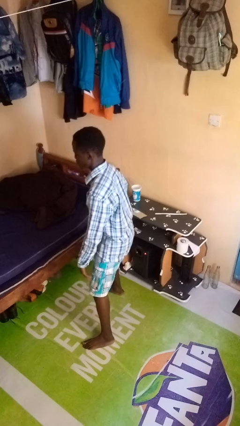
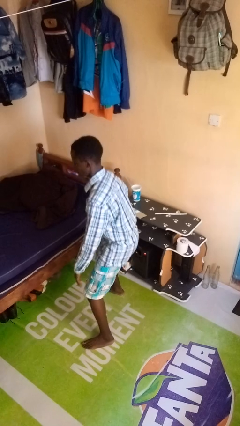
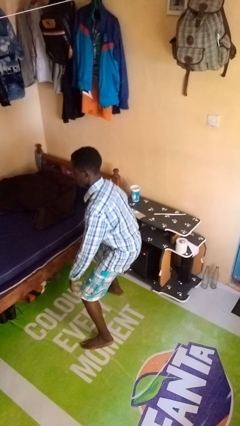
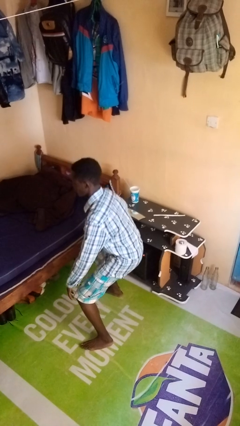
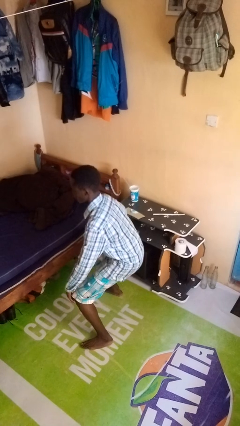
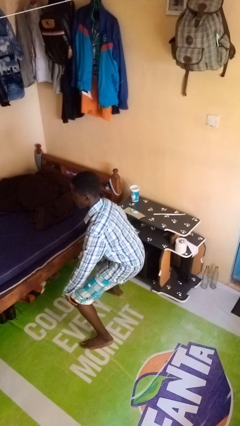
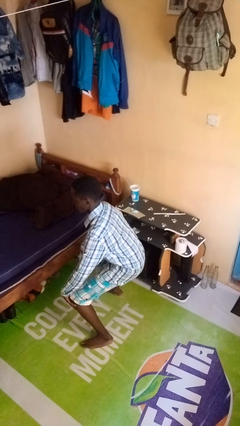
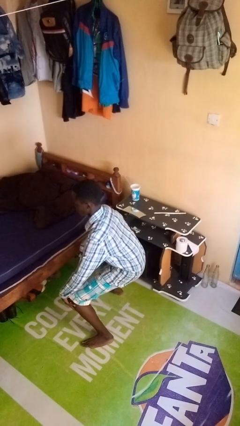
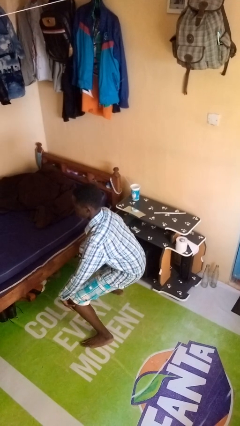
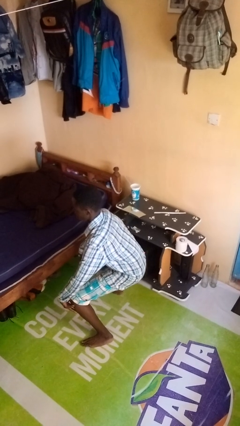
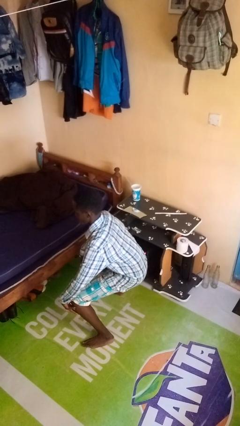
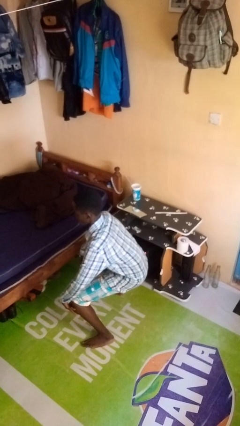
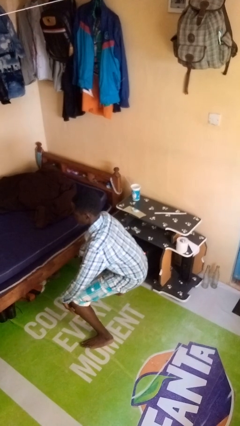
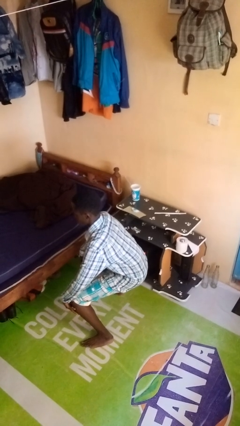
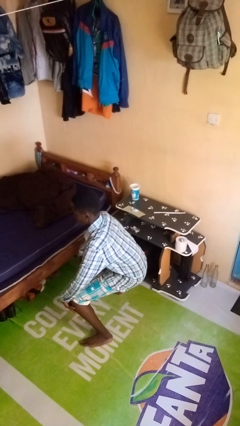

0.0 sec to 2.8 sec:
person squats

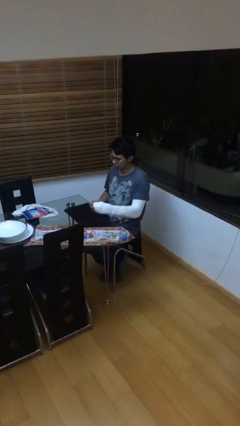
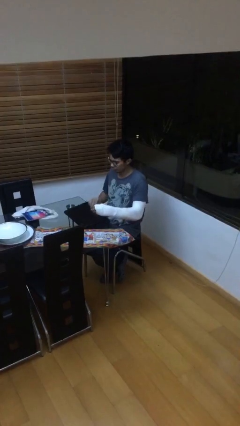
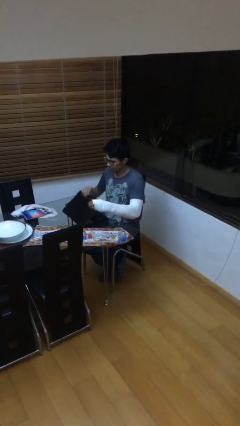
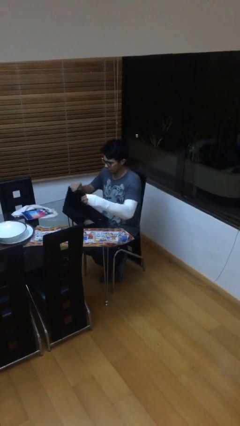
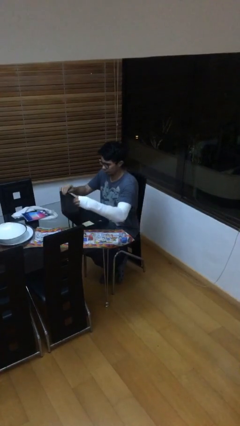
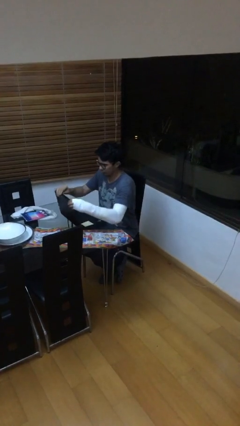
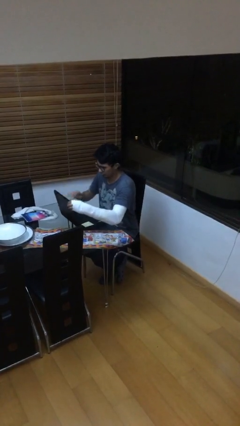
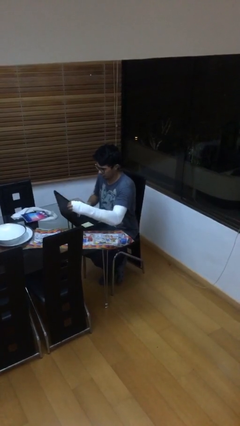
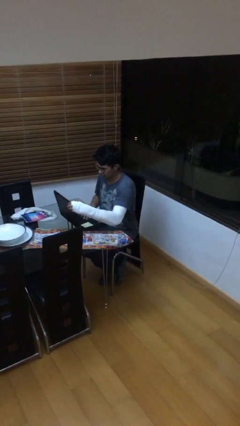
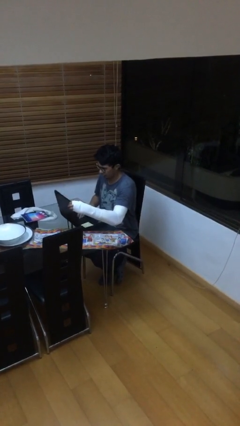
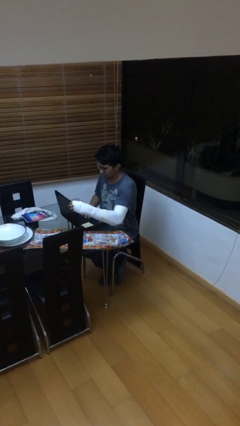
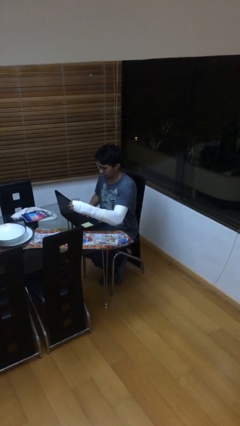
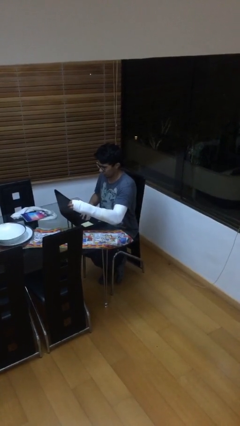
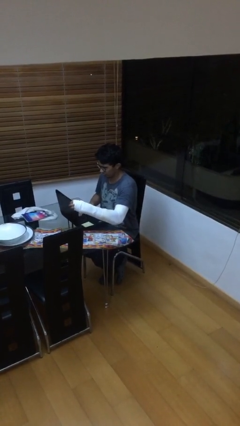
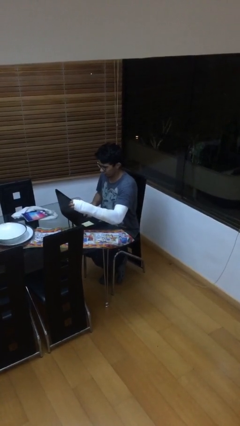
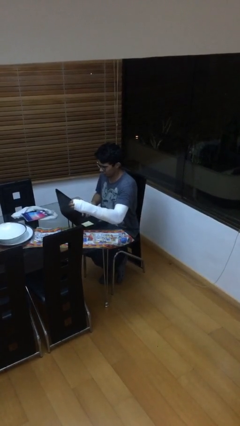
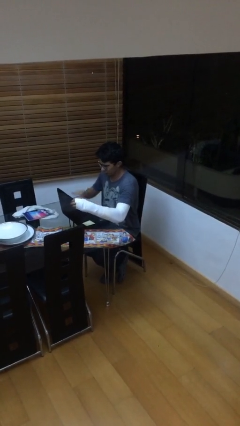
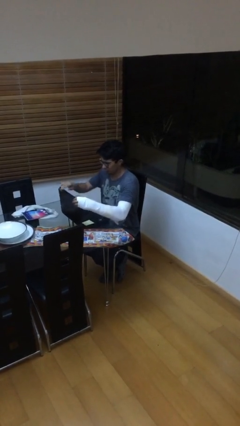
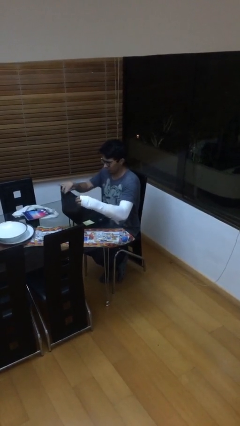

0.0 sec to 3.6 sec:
person interacts with laptop

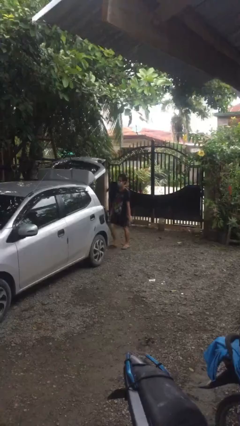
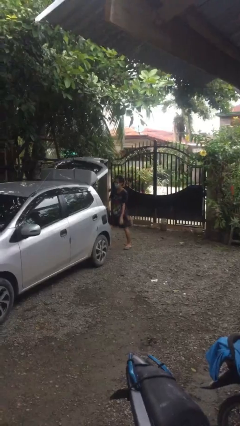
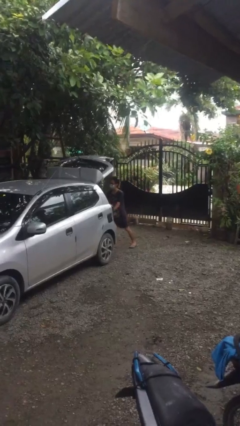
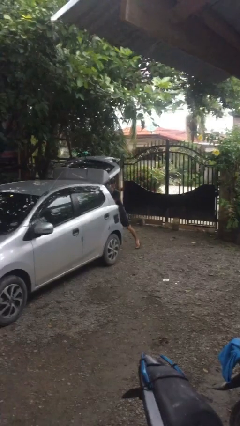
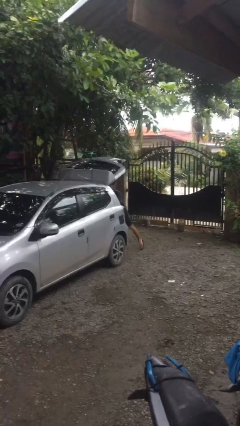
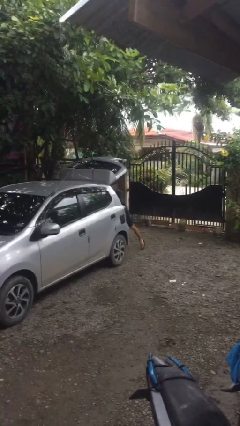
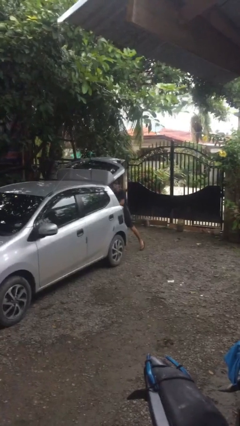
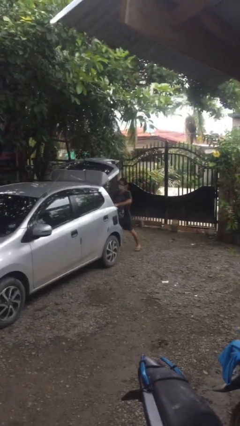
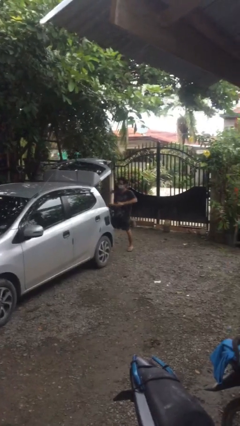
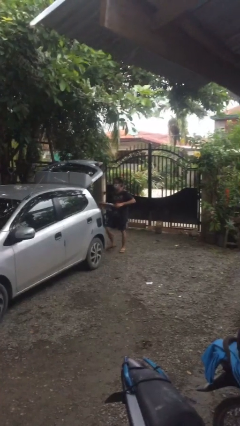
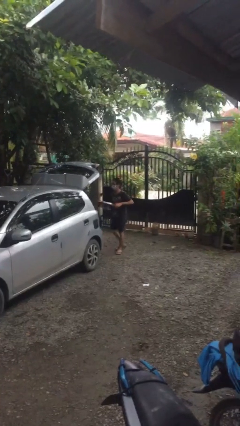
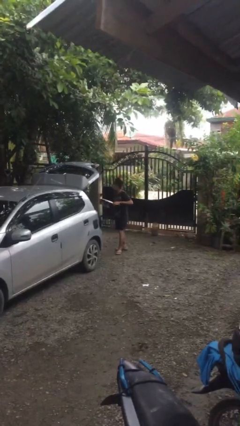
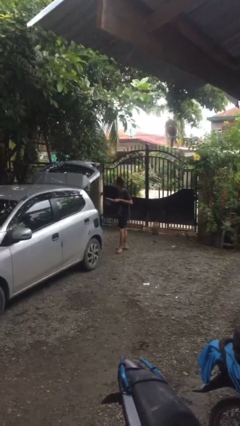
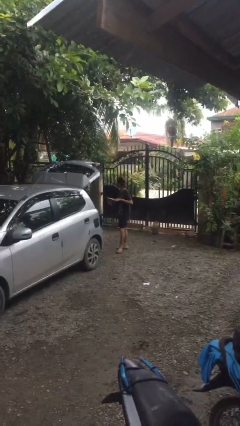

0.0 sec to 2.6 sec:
person unloads car

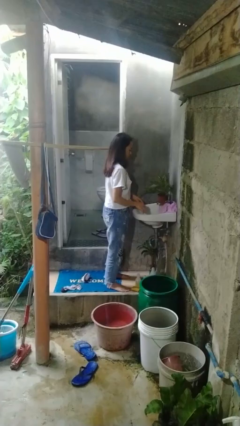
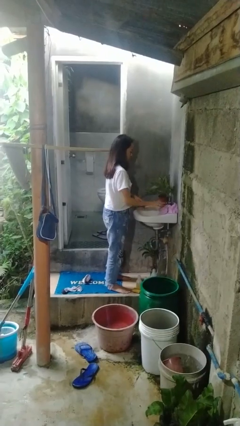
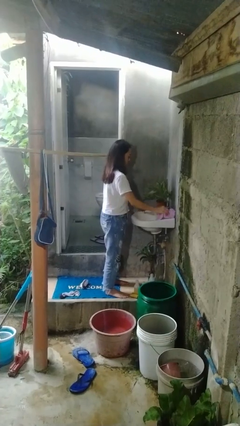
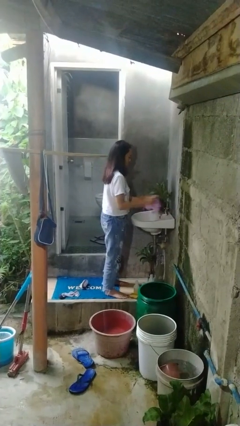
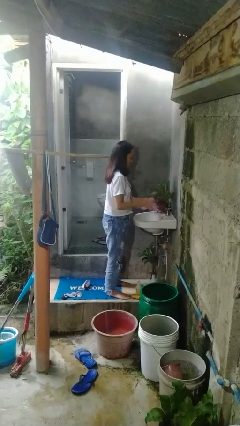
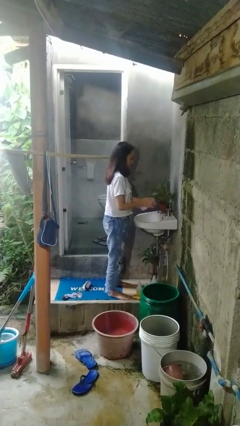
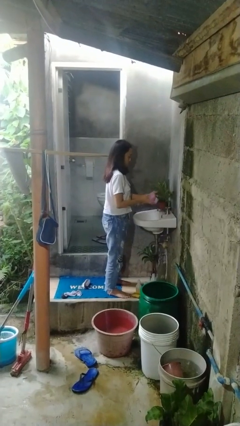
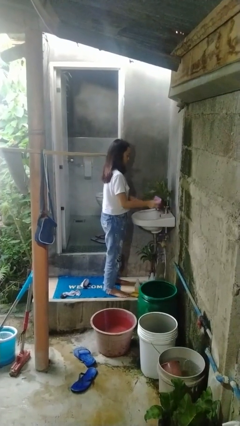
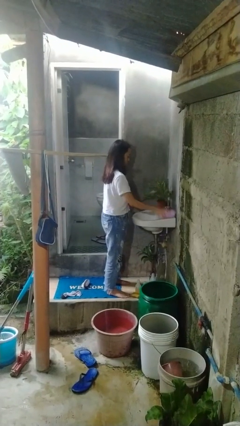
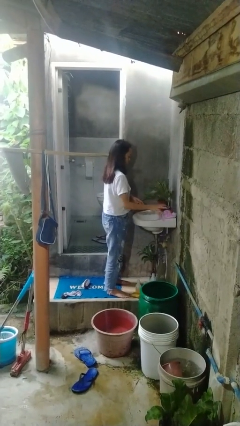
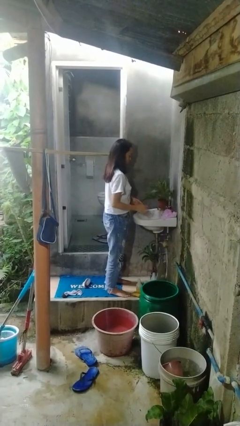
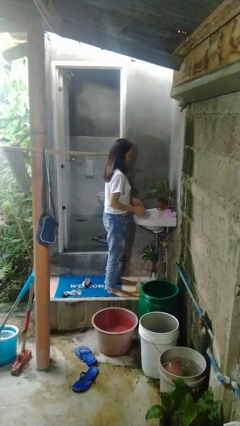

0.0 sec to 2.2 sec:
person dries hands with towel

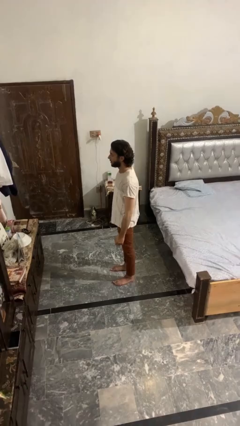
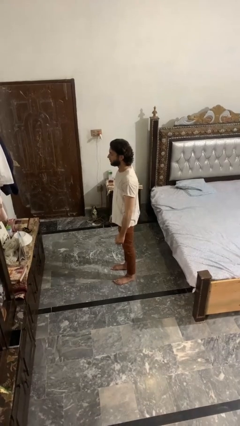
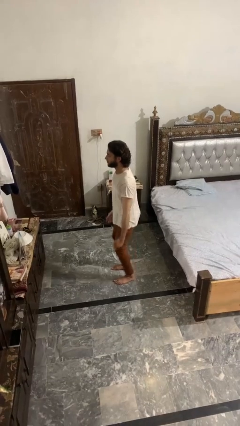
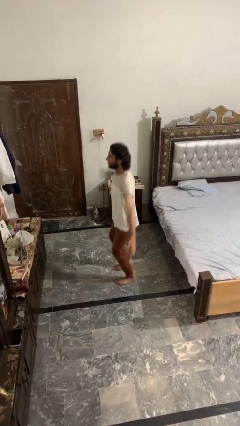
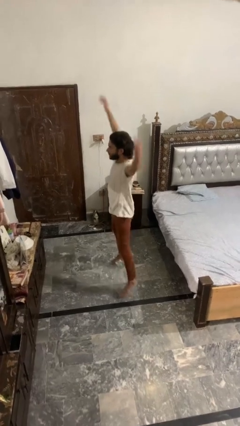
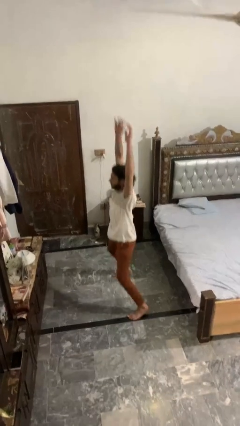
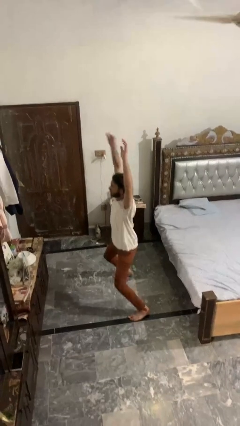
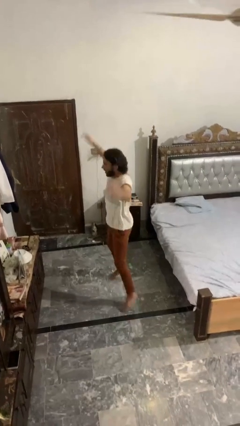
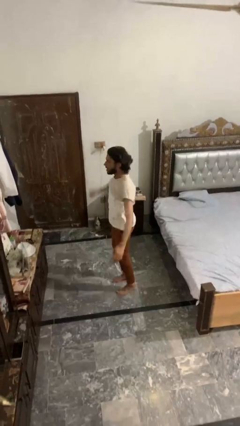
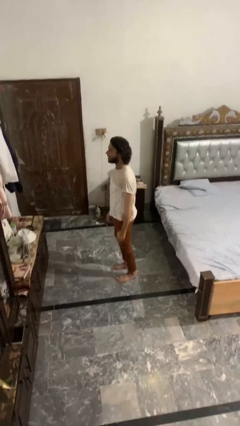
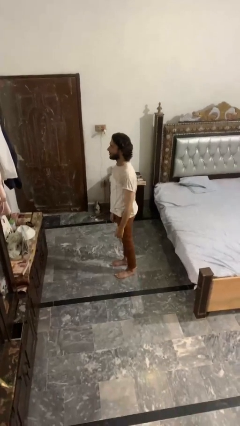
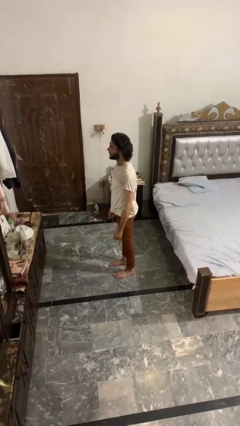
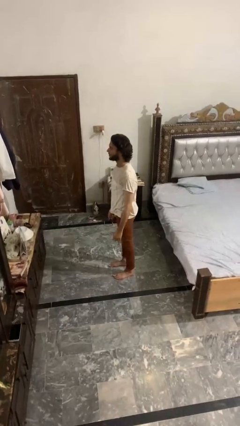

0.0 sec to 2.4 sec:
person exercises with jumping jacks

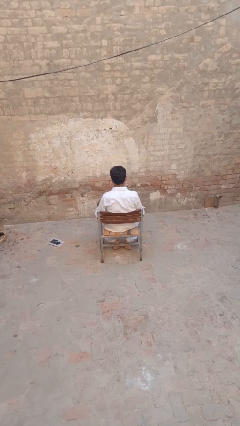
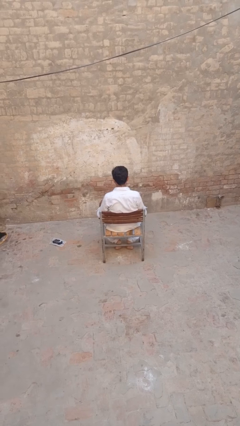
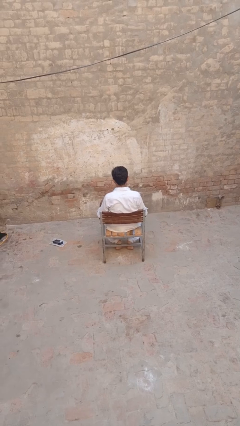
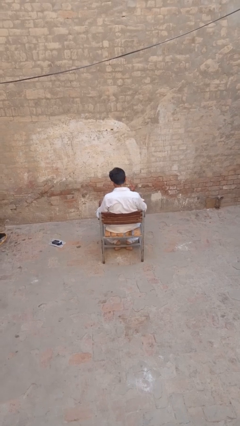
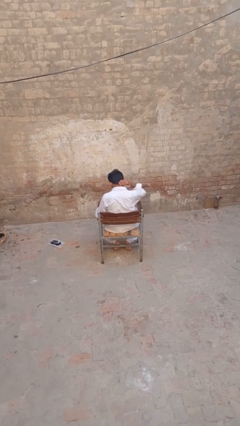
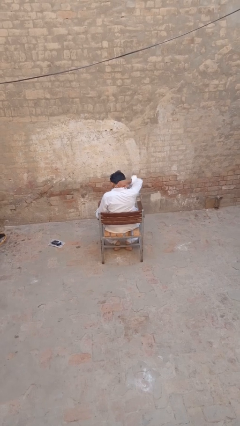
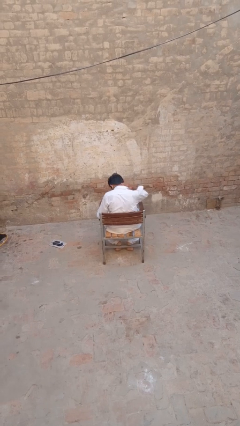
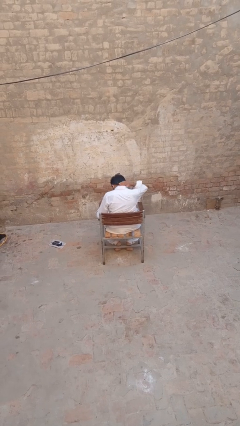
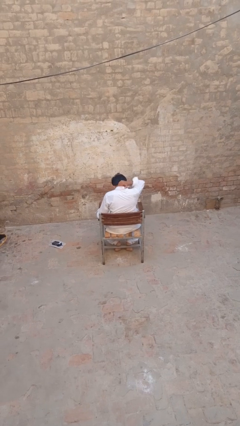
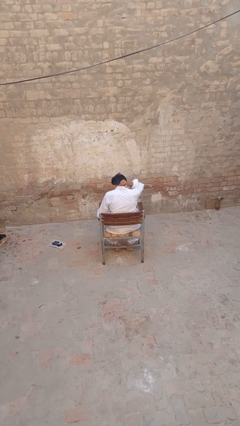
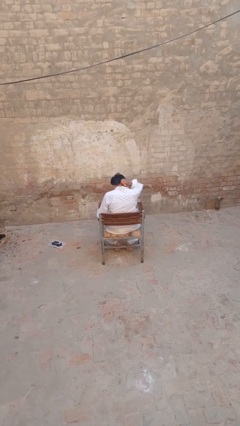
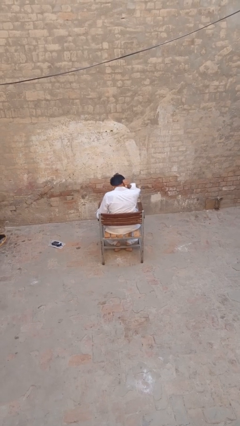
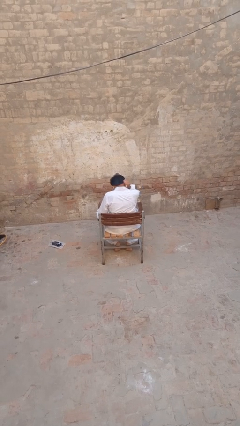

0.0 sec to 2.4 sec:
person rubs neck

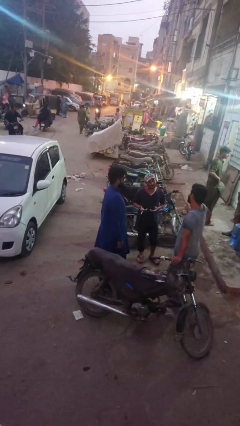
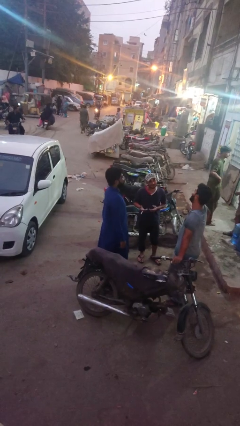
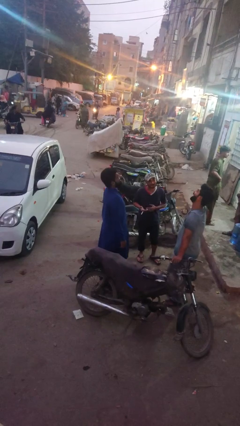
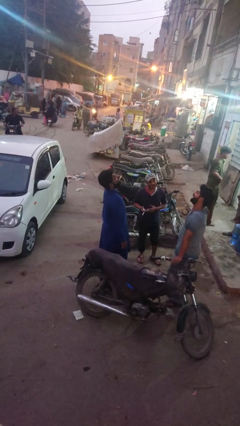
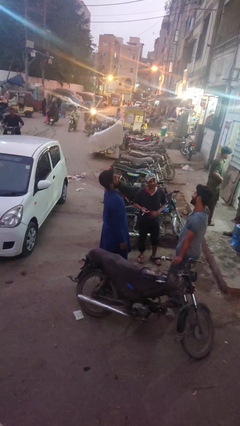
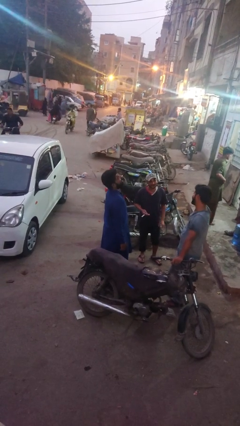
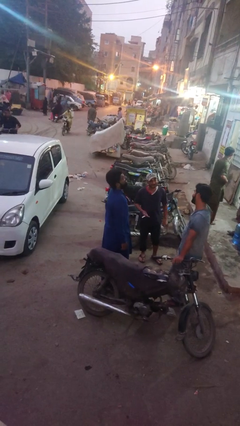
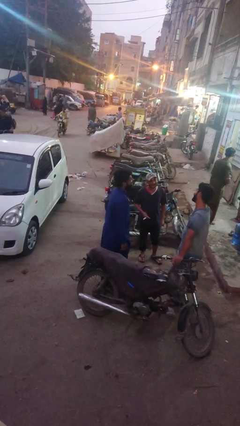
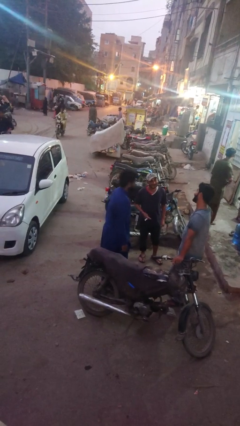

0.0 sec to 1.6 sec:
person laughs with person
